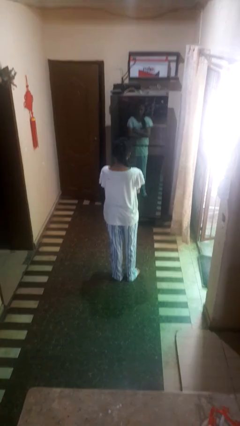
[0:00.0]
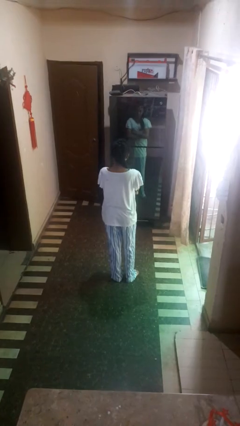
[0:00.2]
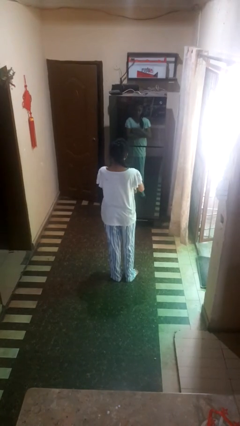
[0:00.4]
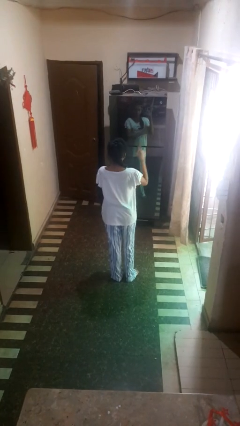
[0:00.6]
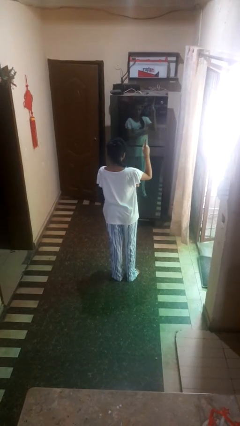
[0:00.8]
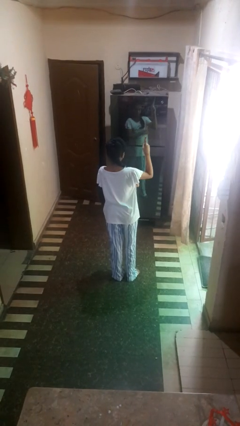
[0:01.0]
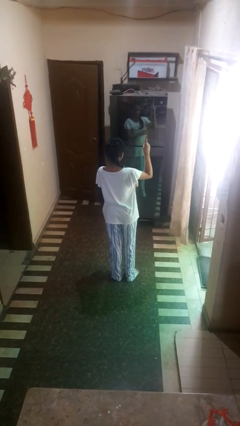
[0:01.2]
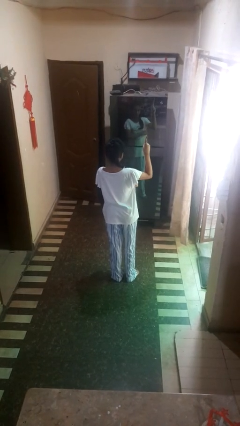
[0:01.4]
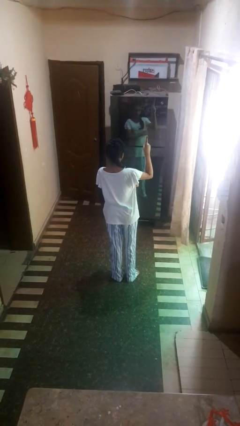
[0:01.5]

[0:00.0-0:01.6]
person gestures number one

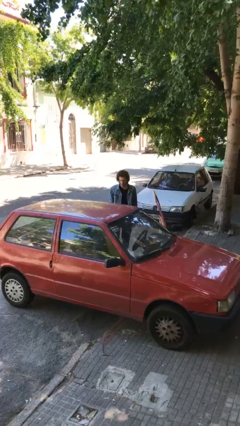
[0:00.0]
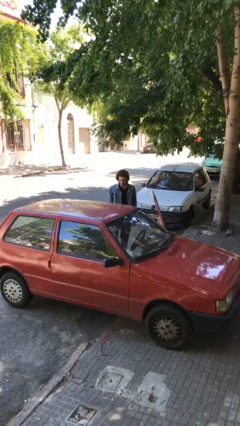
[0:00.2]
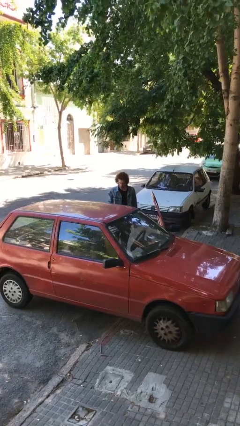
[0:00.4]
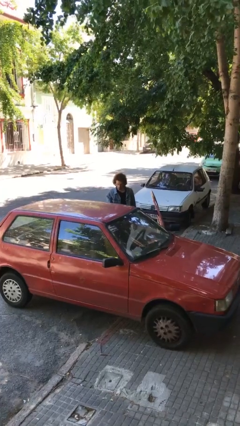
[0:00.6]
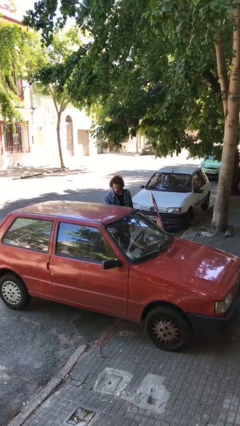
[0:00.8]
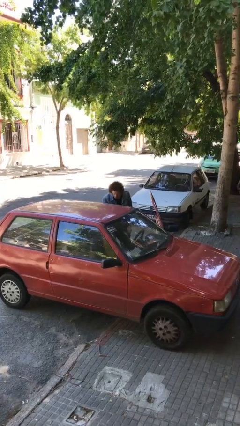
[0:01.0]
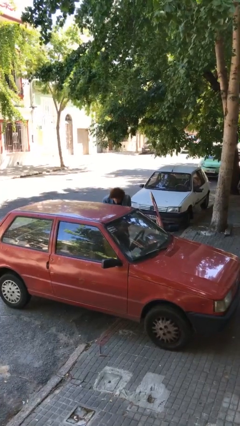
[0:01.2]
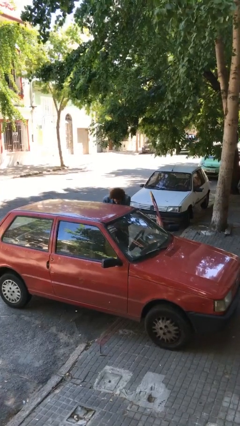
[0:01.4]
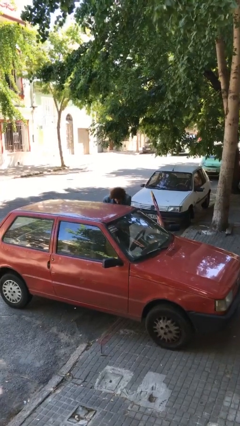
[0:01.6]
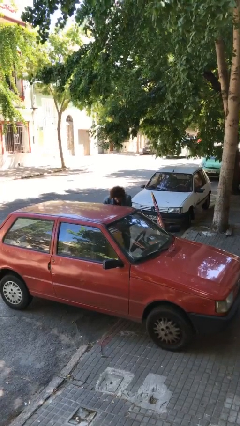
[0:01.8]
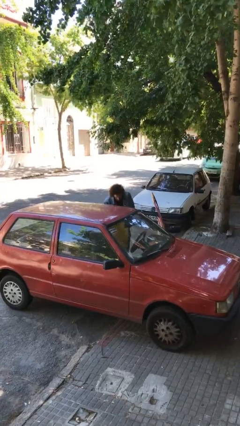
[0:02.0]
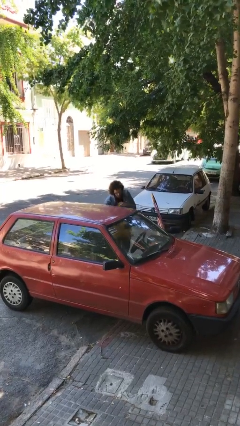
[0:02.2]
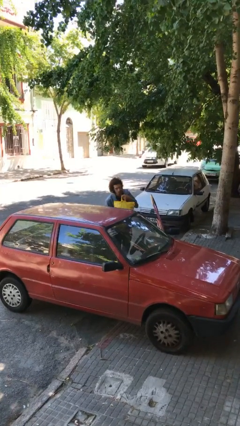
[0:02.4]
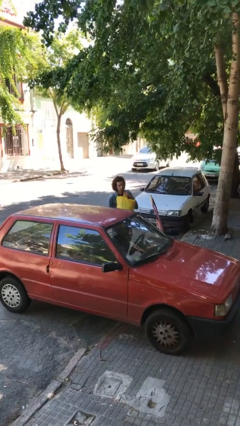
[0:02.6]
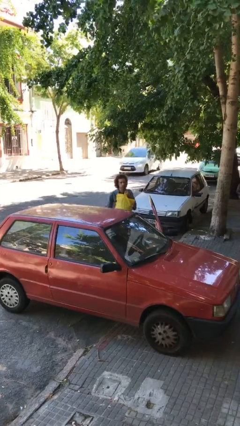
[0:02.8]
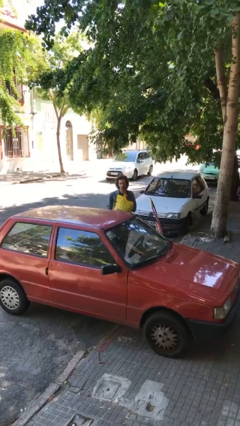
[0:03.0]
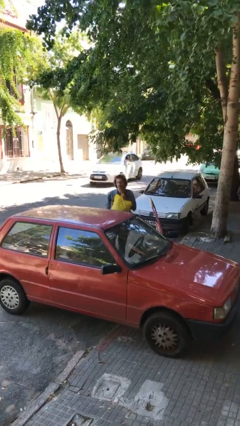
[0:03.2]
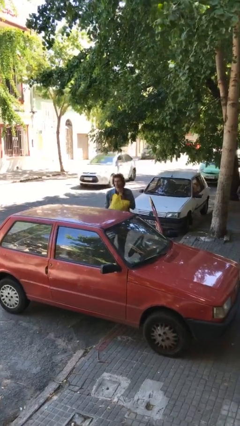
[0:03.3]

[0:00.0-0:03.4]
person unloads car

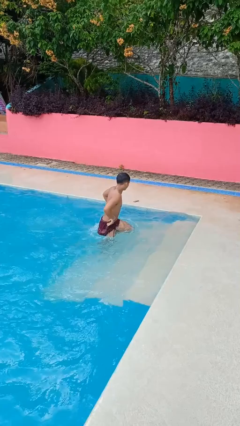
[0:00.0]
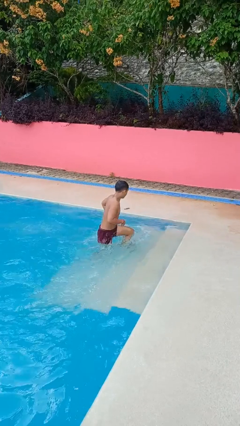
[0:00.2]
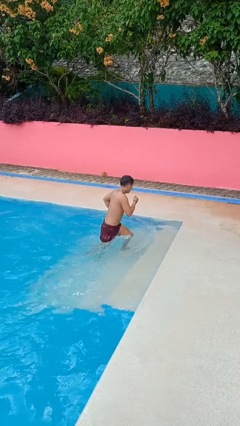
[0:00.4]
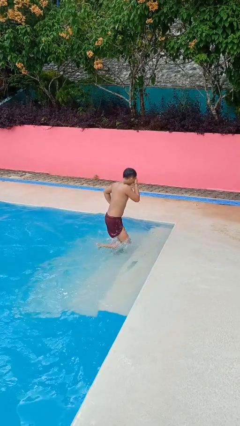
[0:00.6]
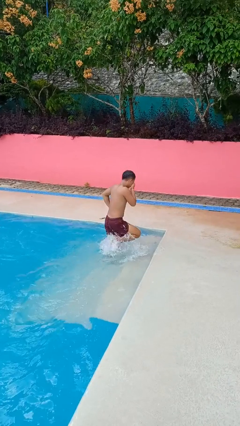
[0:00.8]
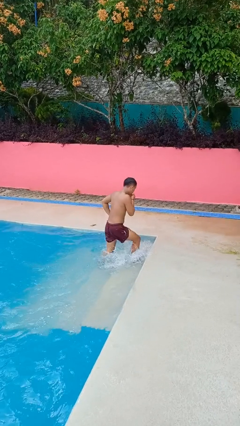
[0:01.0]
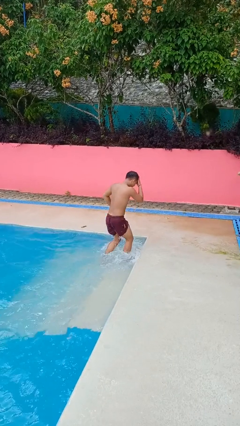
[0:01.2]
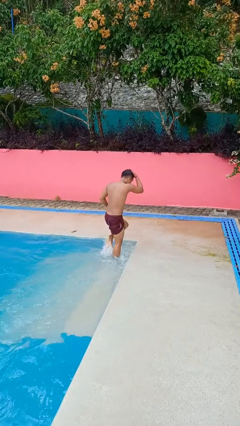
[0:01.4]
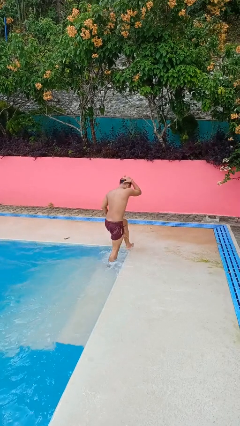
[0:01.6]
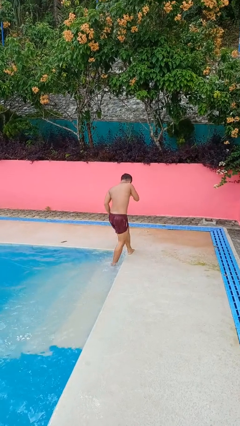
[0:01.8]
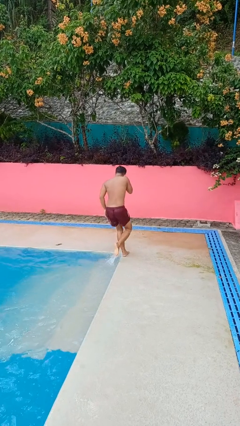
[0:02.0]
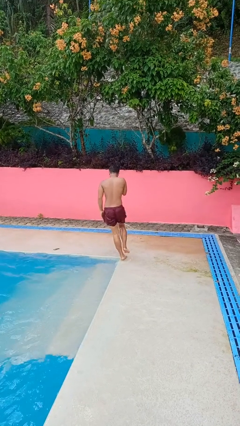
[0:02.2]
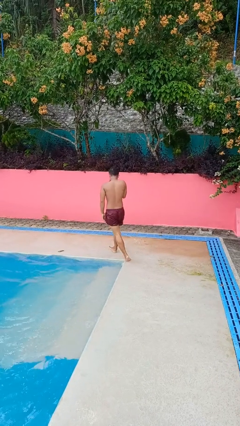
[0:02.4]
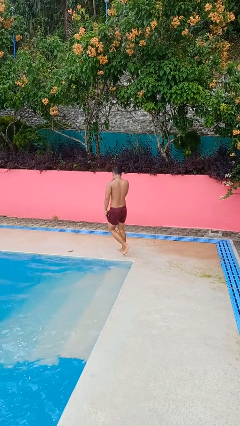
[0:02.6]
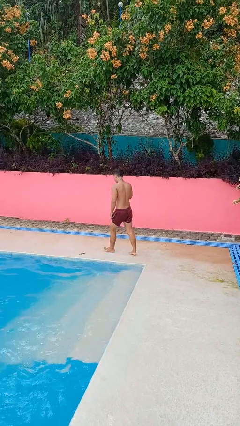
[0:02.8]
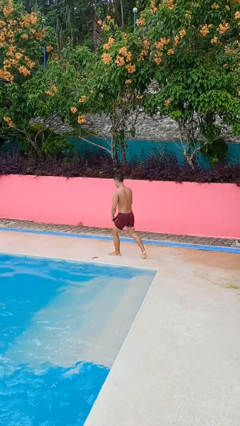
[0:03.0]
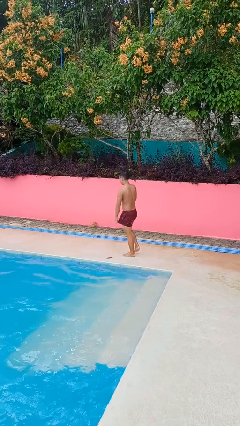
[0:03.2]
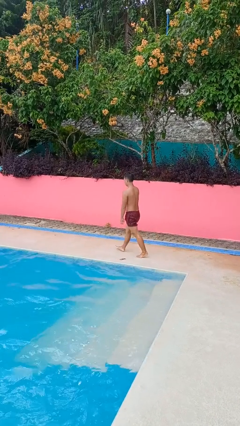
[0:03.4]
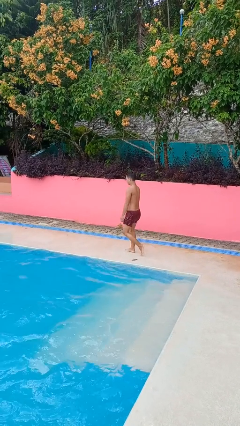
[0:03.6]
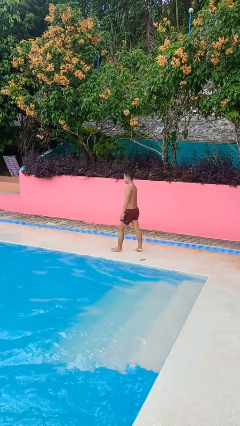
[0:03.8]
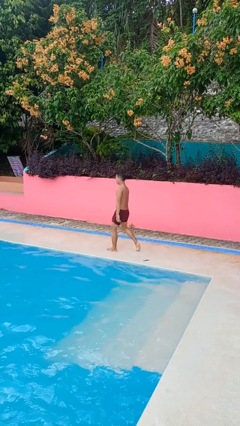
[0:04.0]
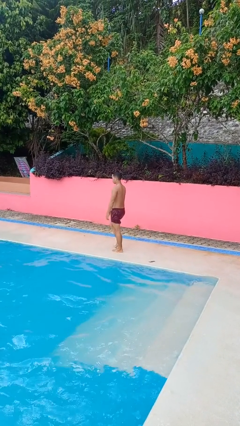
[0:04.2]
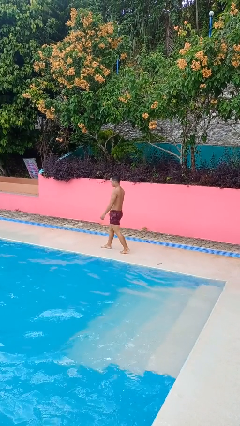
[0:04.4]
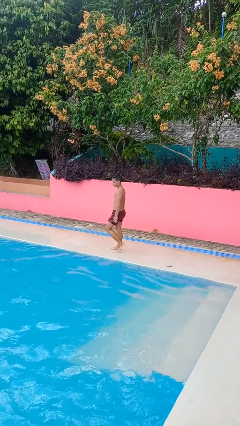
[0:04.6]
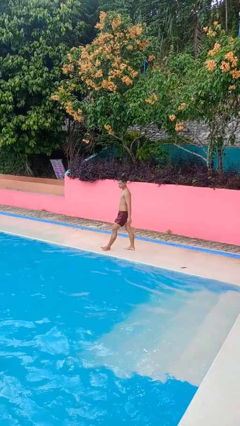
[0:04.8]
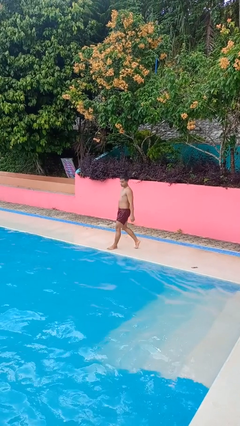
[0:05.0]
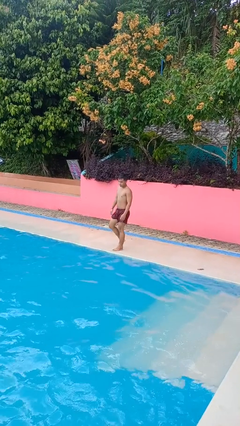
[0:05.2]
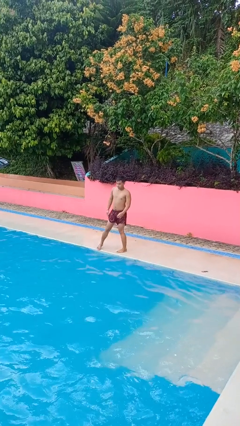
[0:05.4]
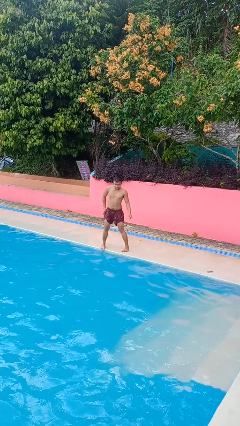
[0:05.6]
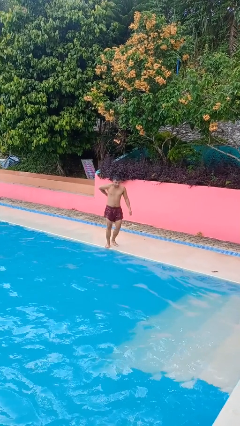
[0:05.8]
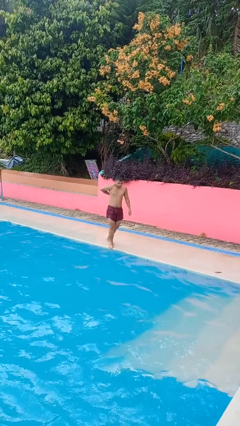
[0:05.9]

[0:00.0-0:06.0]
person exits pool

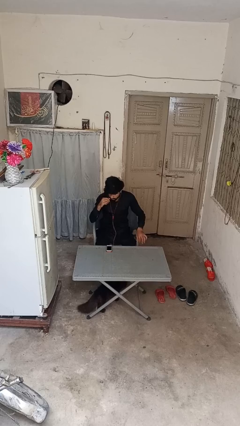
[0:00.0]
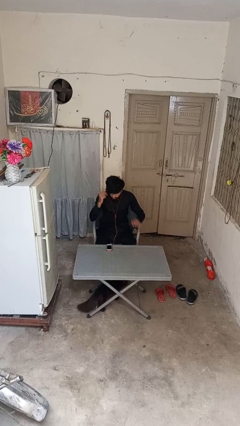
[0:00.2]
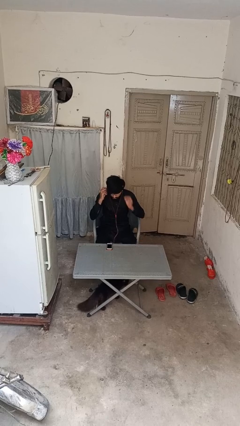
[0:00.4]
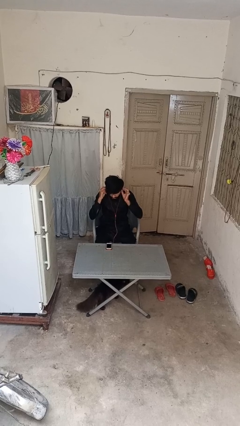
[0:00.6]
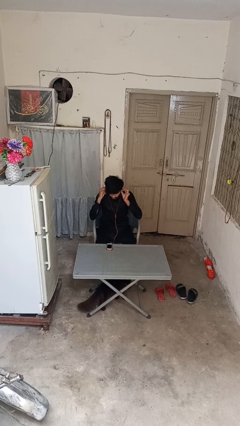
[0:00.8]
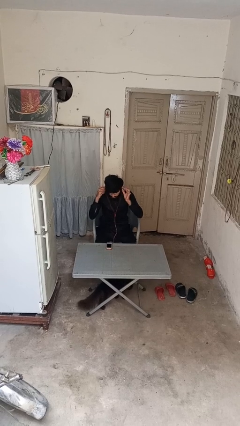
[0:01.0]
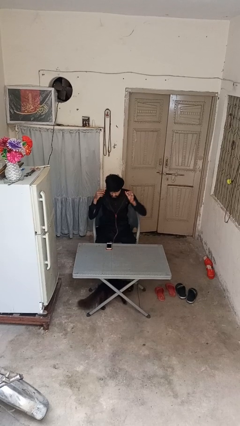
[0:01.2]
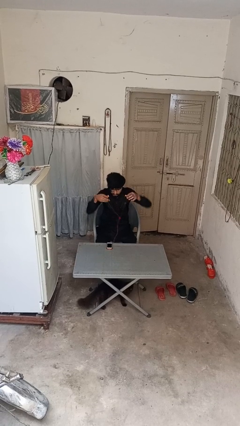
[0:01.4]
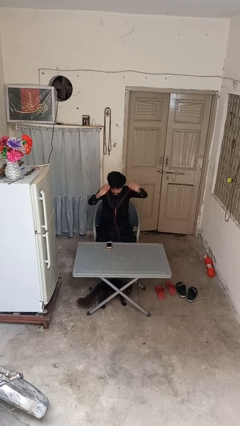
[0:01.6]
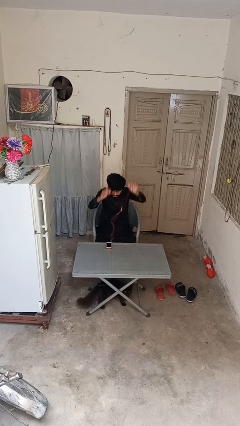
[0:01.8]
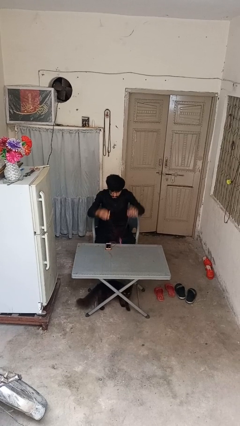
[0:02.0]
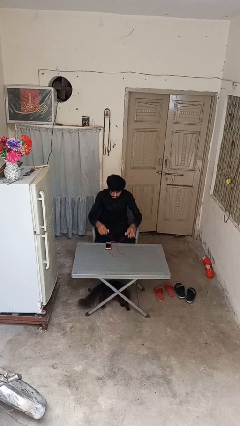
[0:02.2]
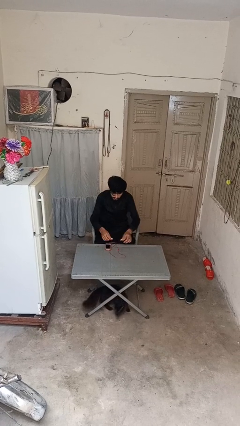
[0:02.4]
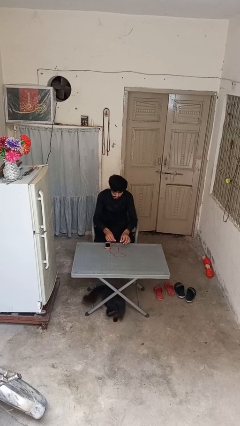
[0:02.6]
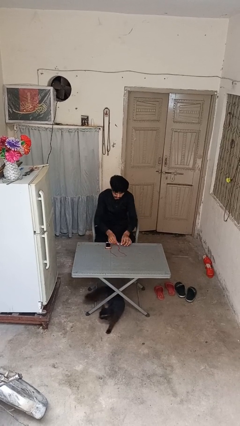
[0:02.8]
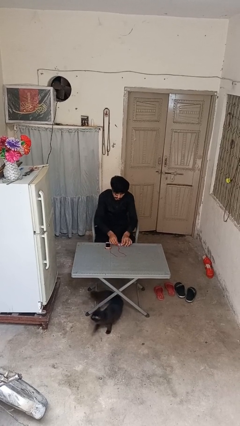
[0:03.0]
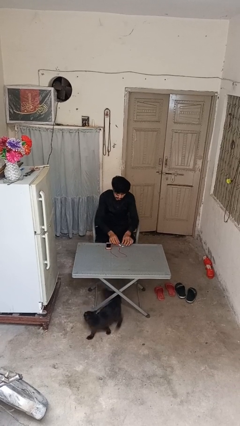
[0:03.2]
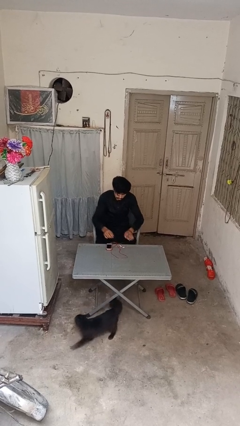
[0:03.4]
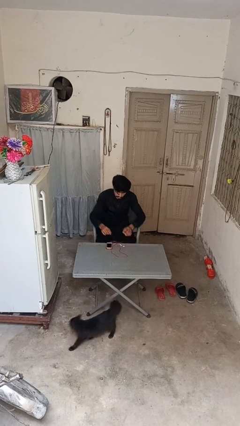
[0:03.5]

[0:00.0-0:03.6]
person takes off headphones

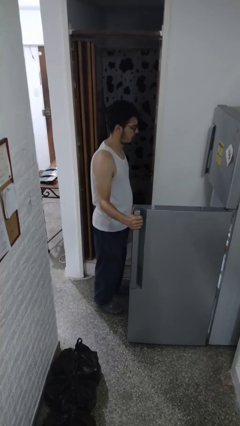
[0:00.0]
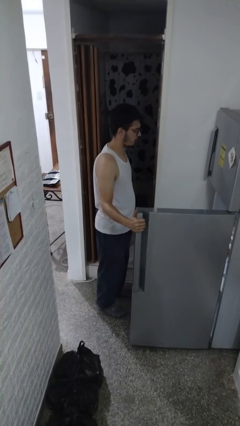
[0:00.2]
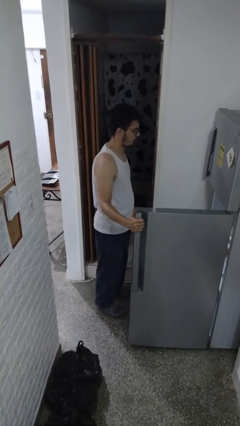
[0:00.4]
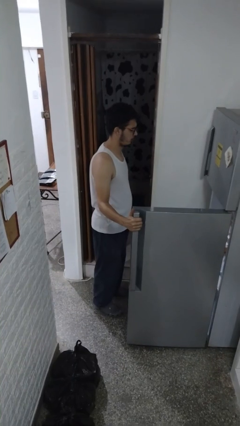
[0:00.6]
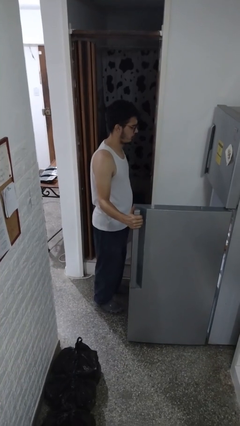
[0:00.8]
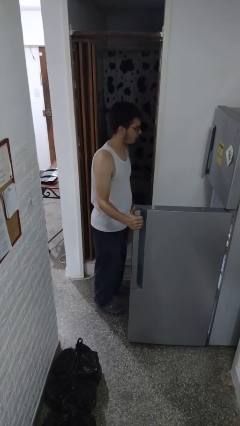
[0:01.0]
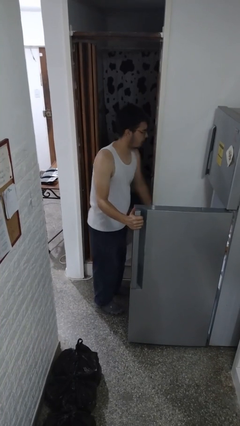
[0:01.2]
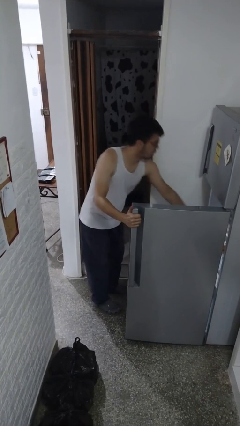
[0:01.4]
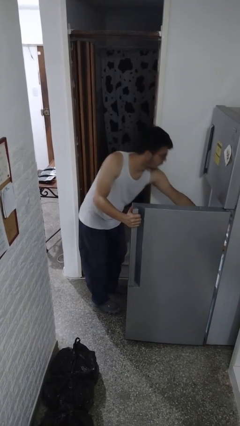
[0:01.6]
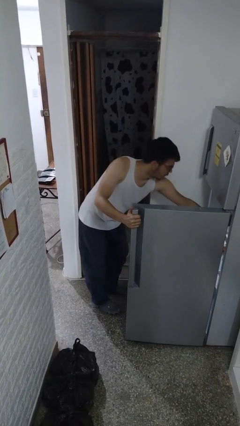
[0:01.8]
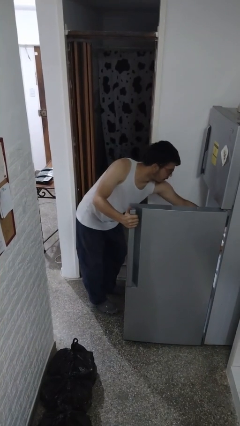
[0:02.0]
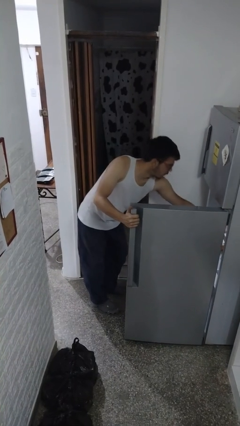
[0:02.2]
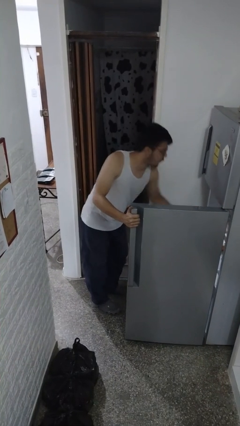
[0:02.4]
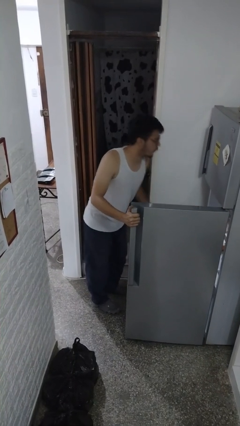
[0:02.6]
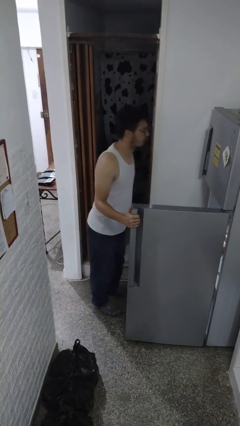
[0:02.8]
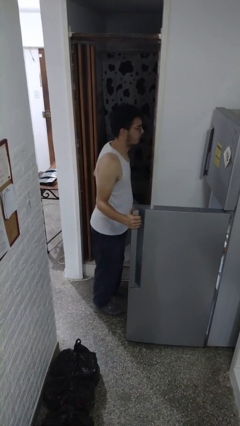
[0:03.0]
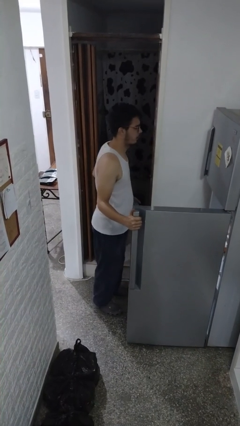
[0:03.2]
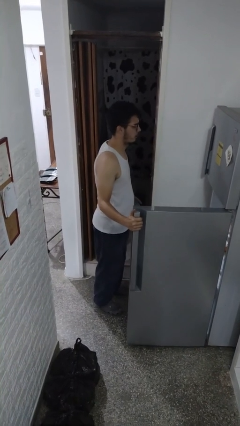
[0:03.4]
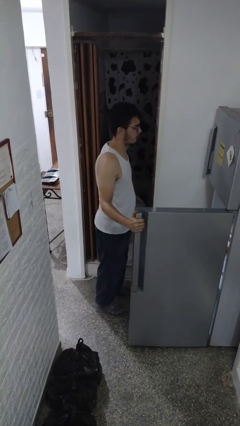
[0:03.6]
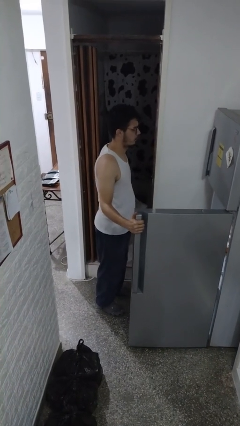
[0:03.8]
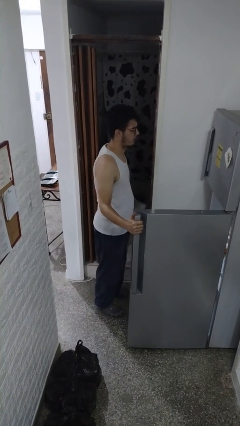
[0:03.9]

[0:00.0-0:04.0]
person takes object from refrigerator
